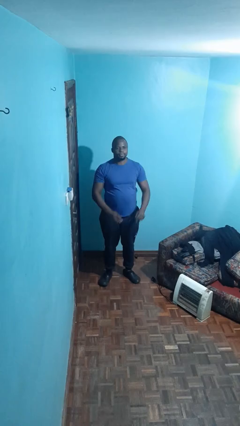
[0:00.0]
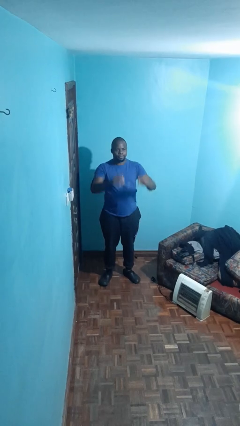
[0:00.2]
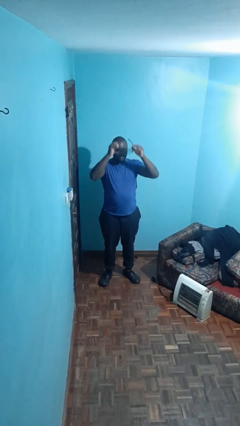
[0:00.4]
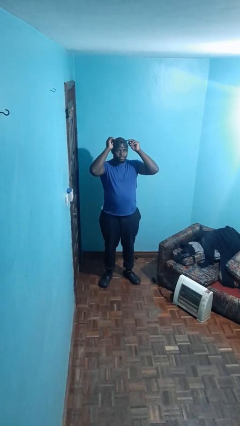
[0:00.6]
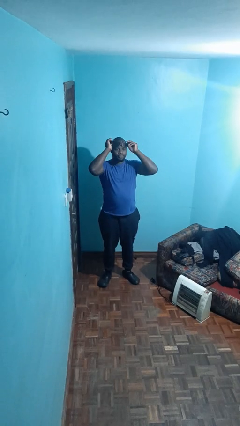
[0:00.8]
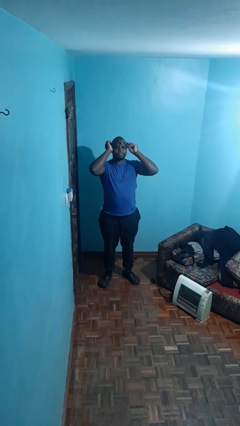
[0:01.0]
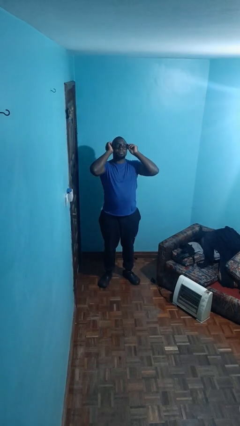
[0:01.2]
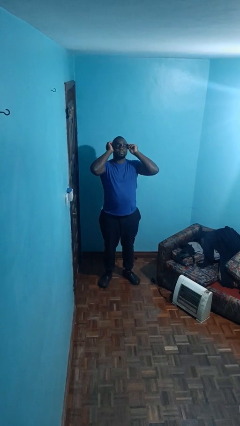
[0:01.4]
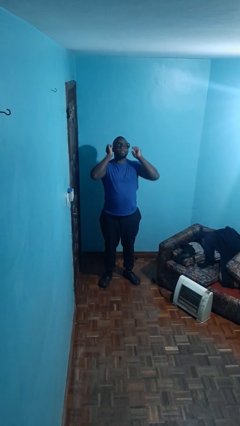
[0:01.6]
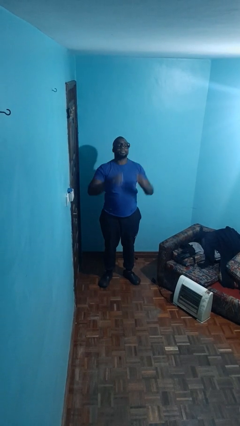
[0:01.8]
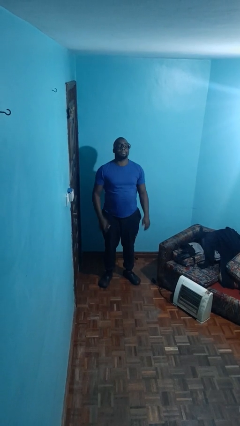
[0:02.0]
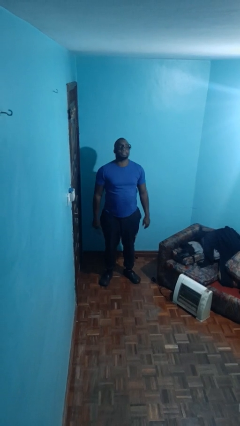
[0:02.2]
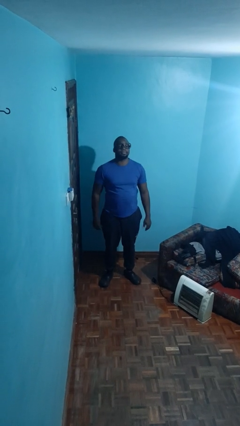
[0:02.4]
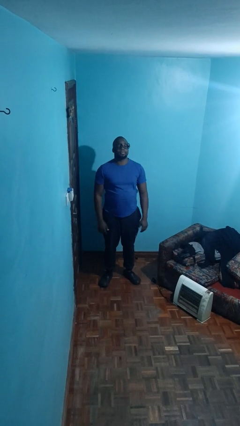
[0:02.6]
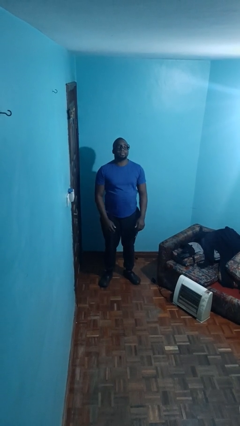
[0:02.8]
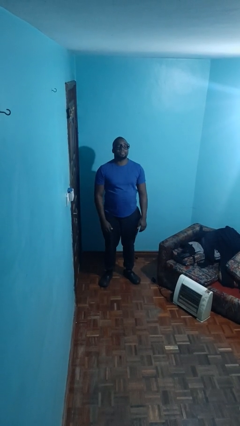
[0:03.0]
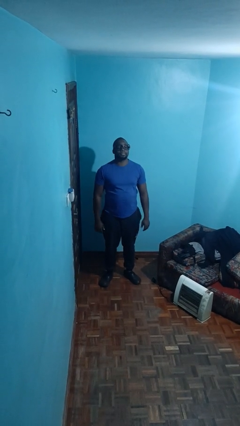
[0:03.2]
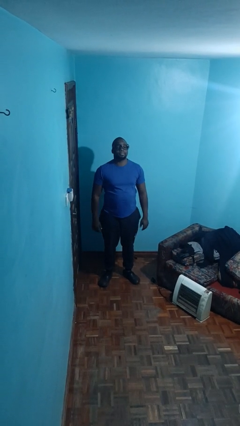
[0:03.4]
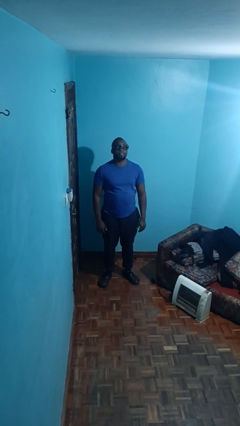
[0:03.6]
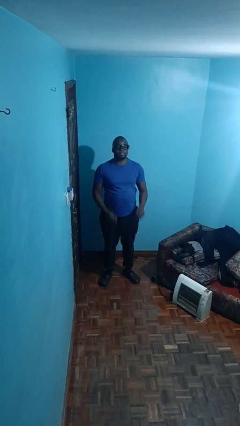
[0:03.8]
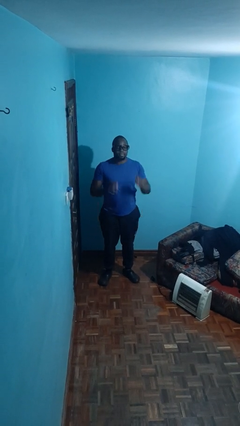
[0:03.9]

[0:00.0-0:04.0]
person puts on glasses

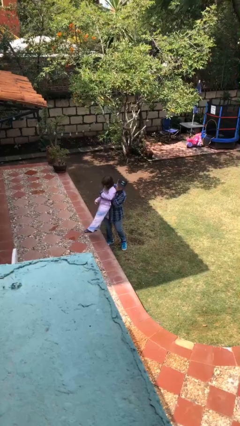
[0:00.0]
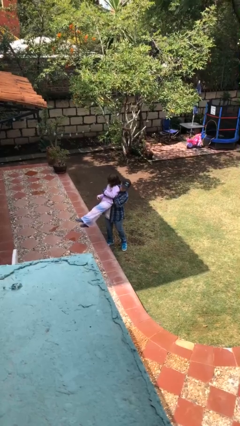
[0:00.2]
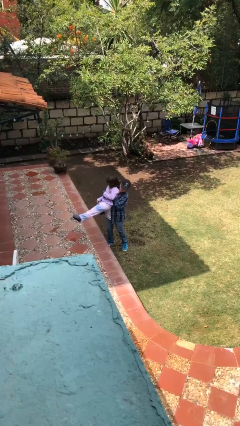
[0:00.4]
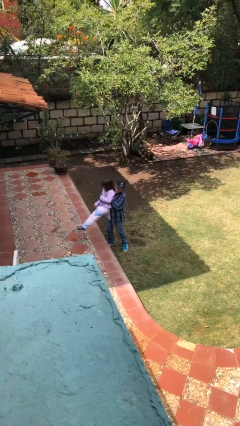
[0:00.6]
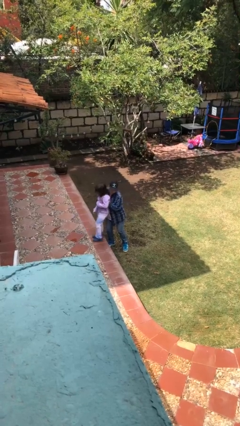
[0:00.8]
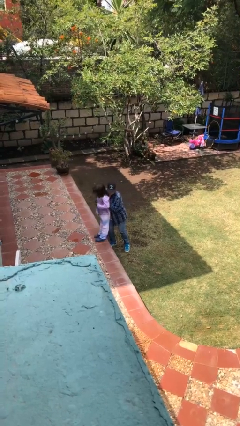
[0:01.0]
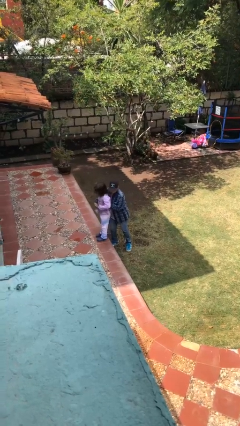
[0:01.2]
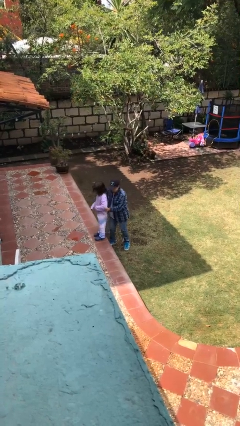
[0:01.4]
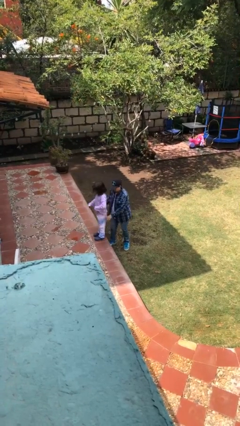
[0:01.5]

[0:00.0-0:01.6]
person puts down person

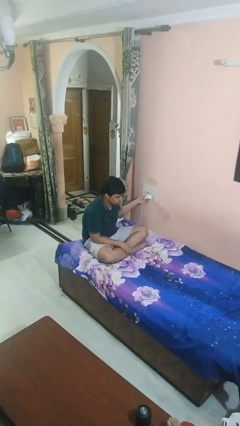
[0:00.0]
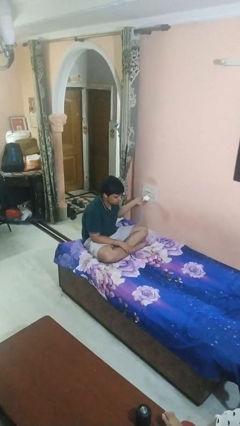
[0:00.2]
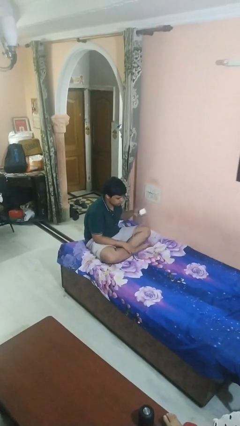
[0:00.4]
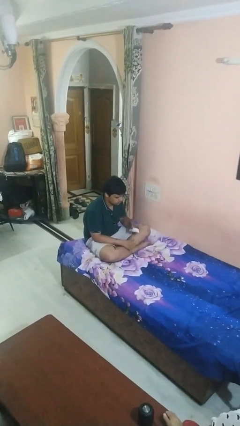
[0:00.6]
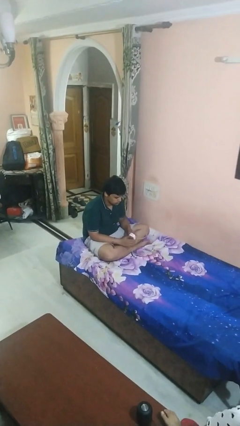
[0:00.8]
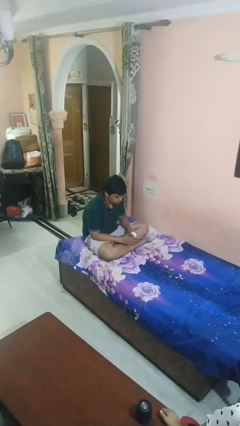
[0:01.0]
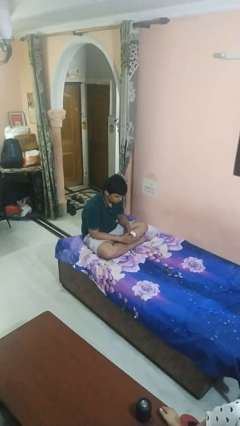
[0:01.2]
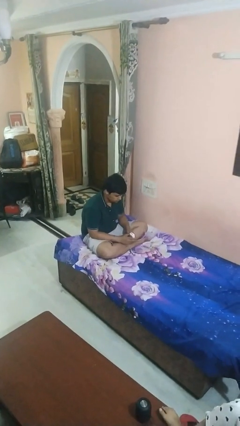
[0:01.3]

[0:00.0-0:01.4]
person unplugs from electrical socket

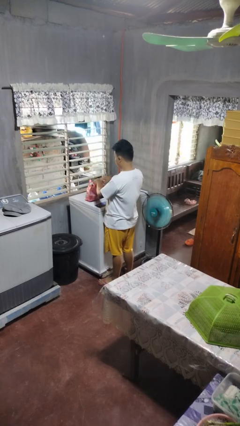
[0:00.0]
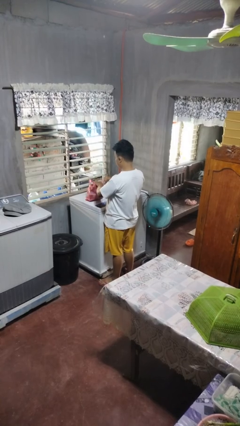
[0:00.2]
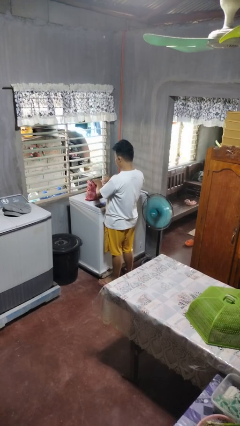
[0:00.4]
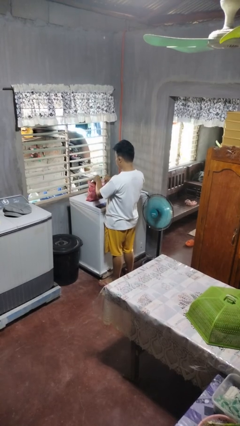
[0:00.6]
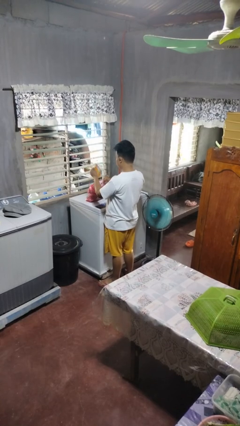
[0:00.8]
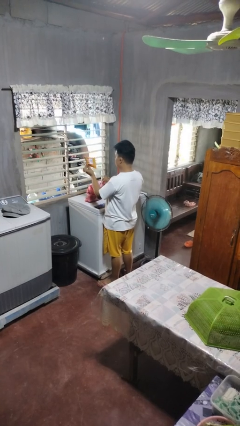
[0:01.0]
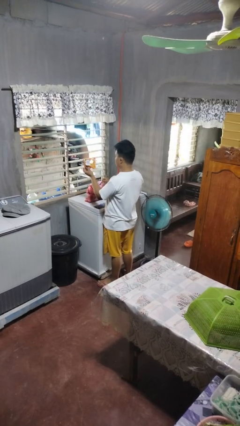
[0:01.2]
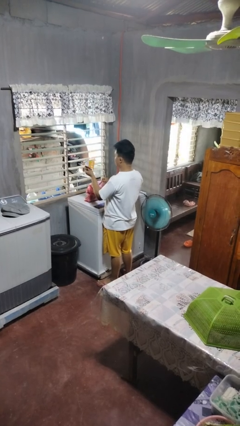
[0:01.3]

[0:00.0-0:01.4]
person takes object from bag

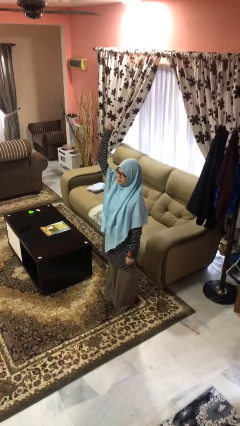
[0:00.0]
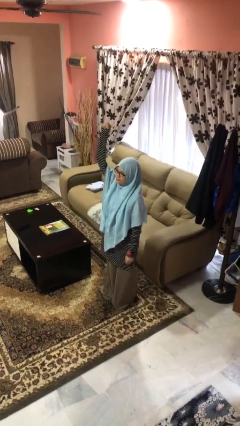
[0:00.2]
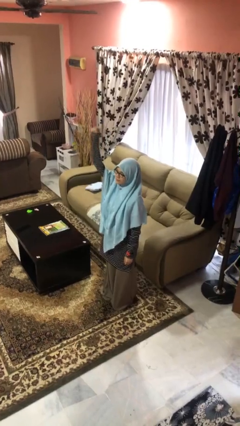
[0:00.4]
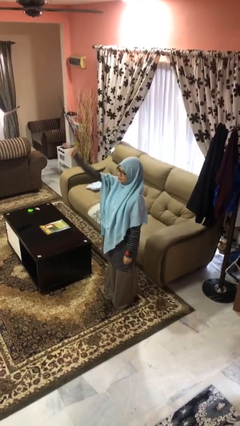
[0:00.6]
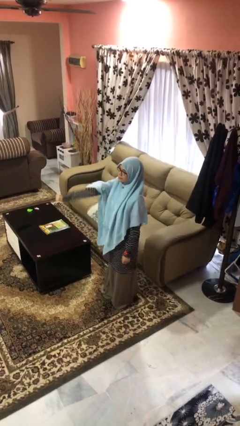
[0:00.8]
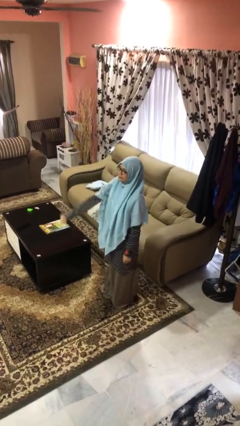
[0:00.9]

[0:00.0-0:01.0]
person gestures lower hand

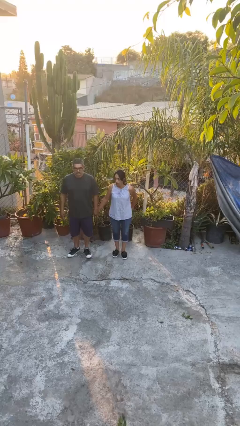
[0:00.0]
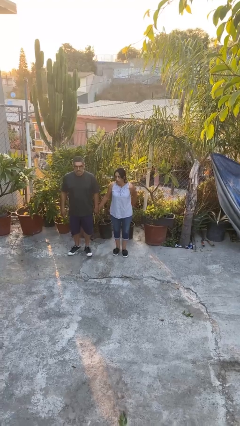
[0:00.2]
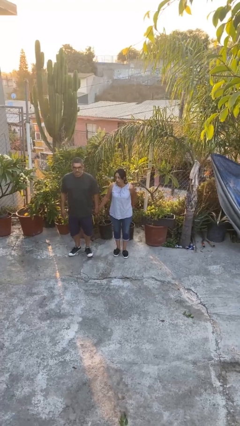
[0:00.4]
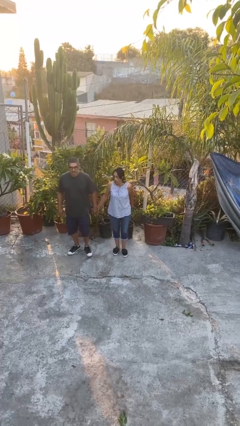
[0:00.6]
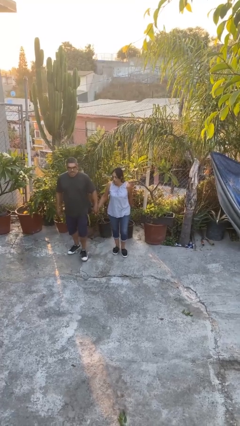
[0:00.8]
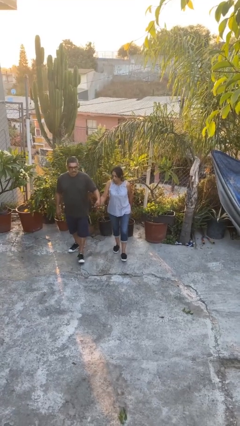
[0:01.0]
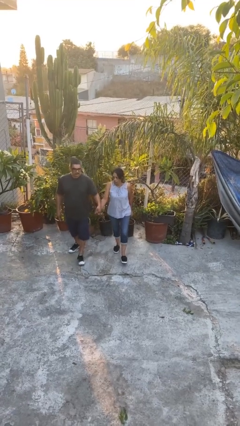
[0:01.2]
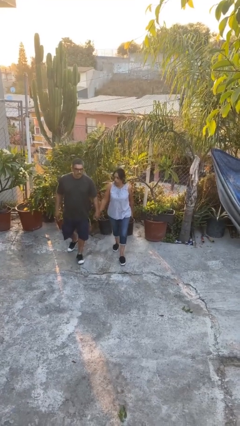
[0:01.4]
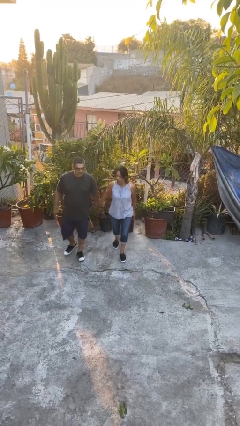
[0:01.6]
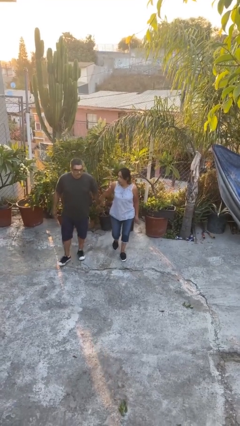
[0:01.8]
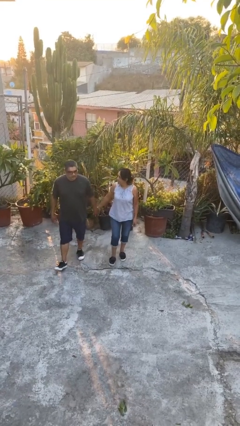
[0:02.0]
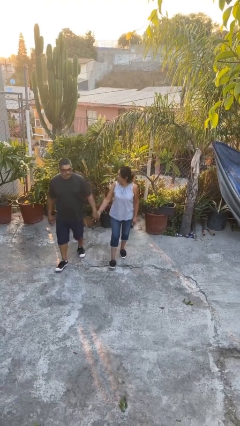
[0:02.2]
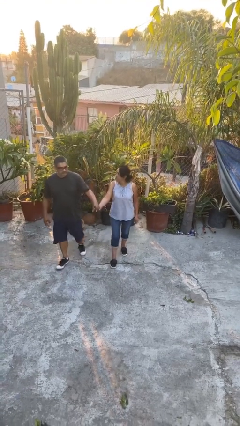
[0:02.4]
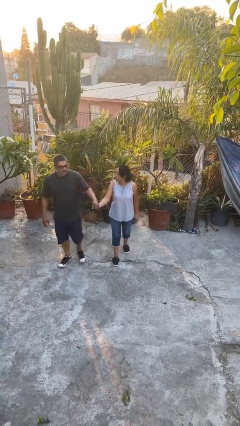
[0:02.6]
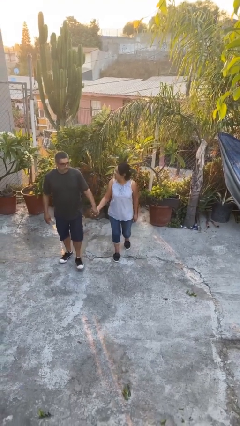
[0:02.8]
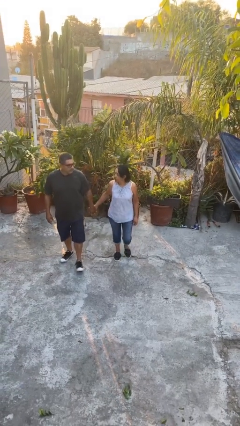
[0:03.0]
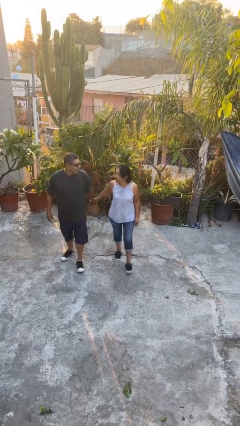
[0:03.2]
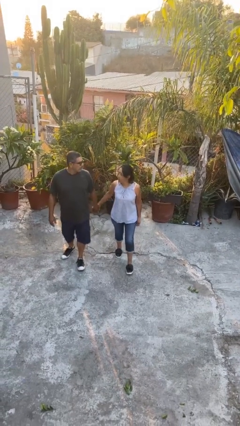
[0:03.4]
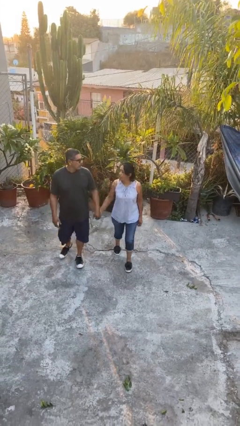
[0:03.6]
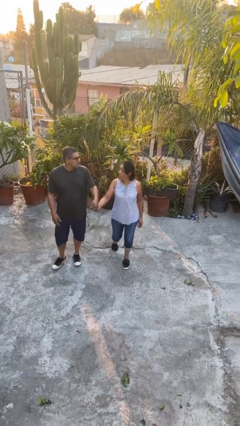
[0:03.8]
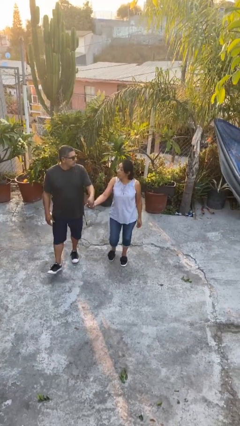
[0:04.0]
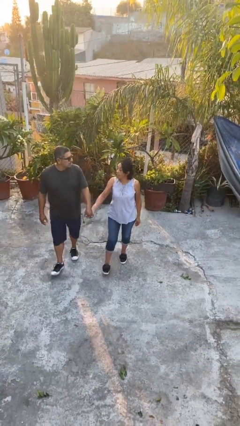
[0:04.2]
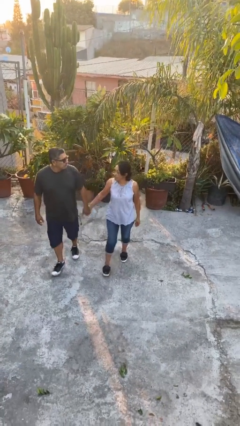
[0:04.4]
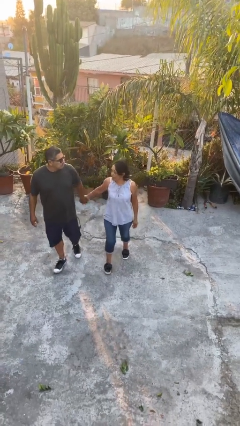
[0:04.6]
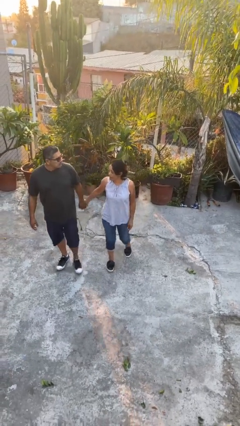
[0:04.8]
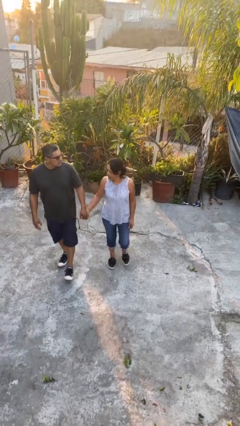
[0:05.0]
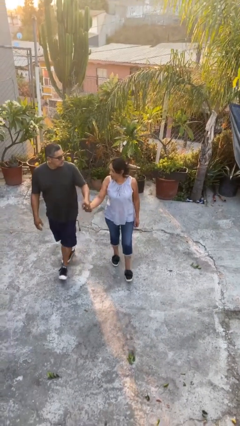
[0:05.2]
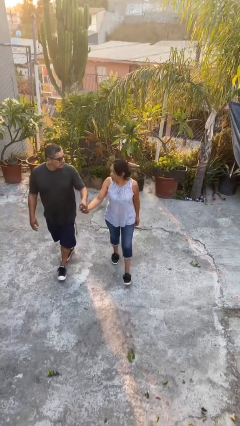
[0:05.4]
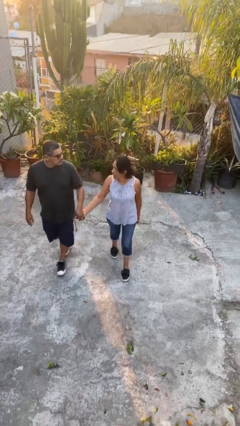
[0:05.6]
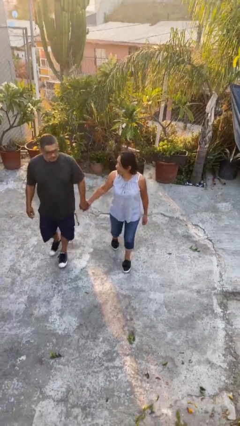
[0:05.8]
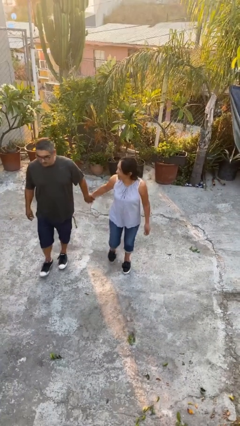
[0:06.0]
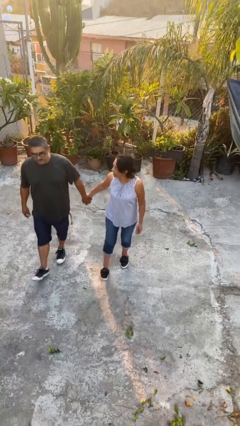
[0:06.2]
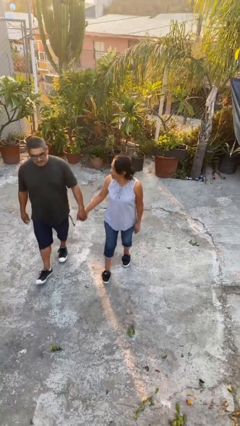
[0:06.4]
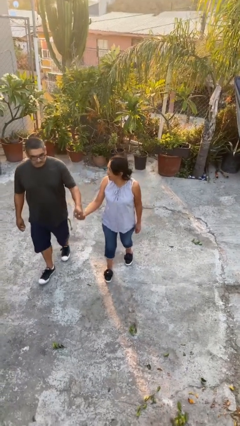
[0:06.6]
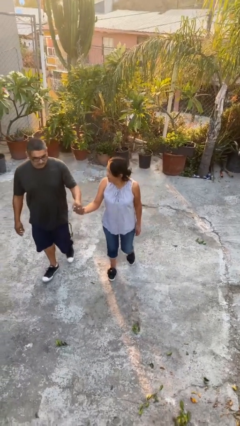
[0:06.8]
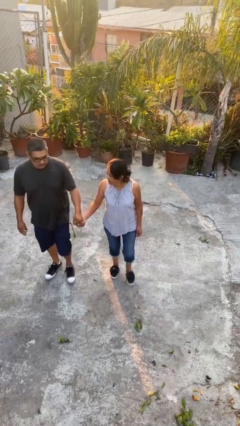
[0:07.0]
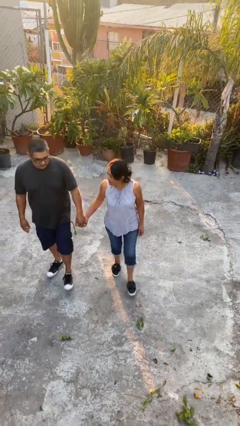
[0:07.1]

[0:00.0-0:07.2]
person holds hand

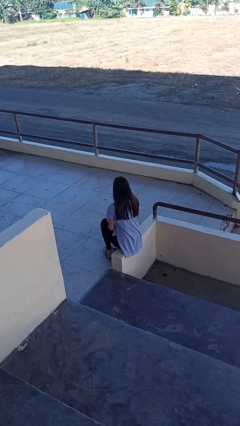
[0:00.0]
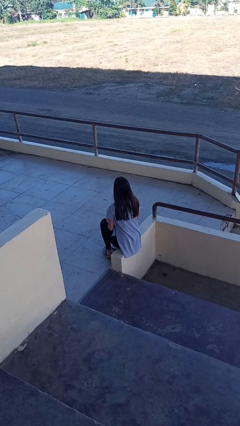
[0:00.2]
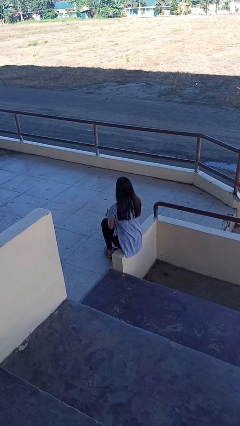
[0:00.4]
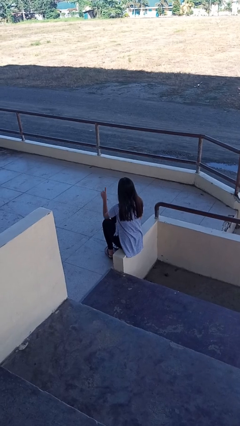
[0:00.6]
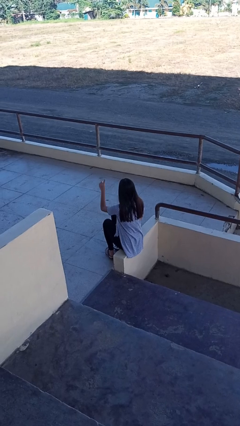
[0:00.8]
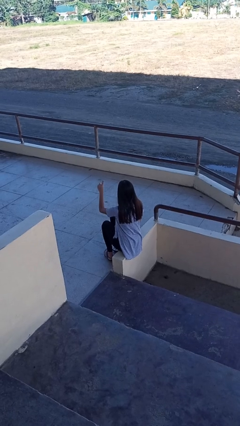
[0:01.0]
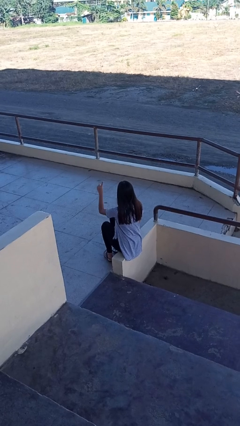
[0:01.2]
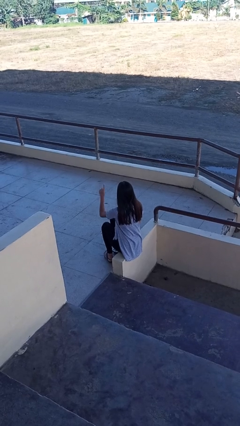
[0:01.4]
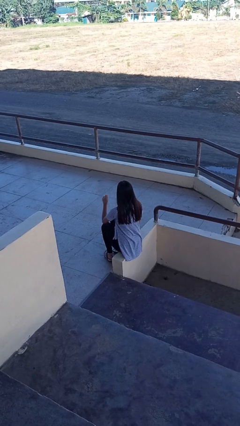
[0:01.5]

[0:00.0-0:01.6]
person gestures number one
